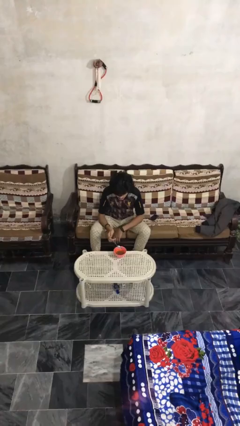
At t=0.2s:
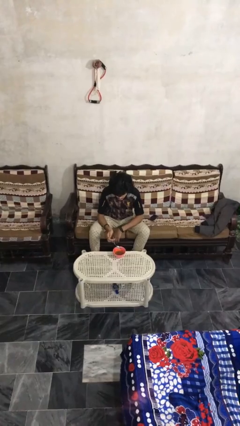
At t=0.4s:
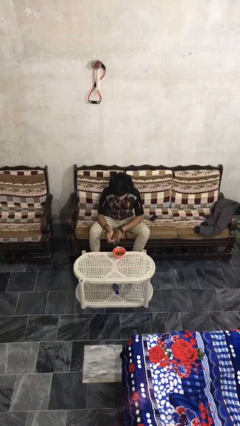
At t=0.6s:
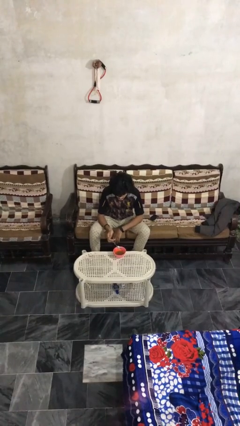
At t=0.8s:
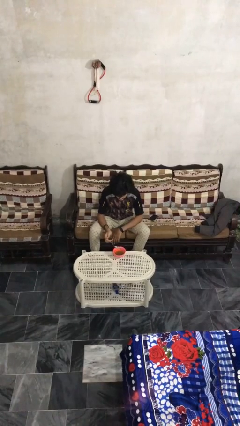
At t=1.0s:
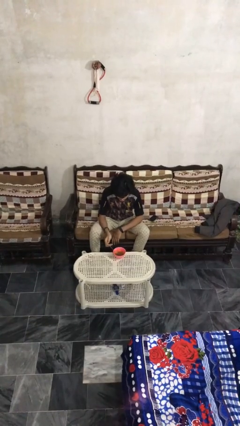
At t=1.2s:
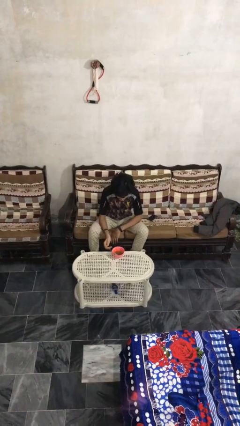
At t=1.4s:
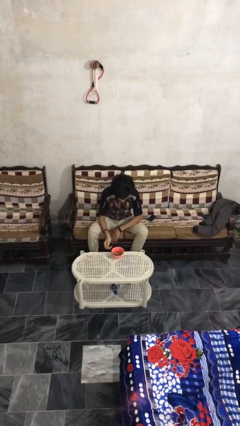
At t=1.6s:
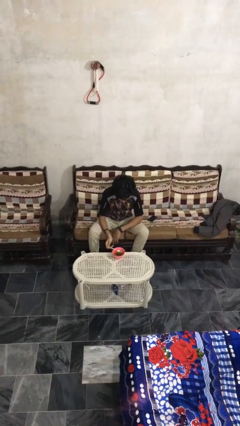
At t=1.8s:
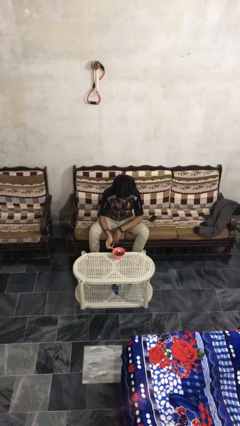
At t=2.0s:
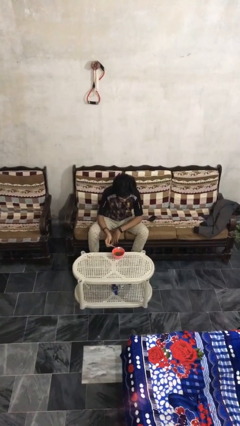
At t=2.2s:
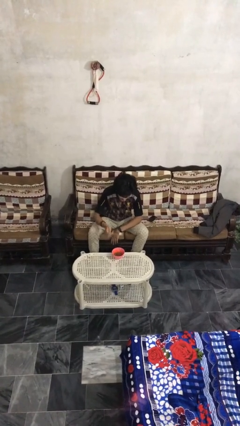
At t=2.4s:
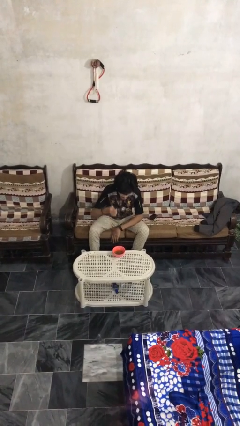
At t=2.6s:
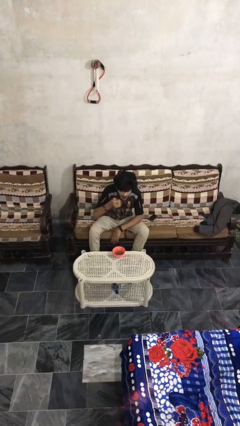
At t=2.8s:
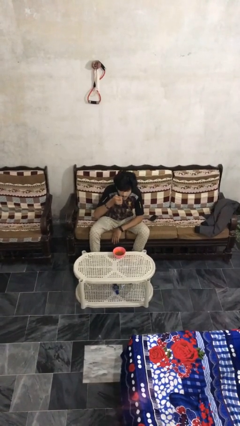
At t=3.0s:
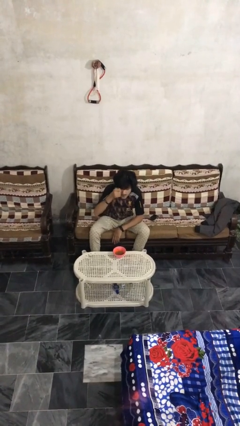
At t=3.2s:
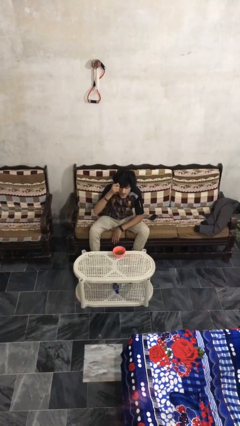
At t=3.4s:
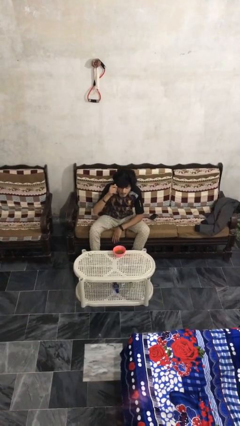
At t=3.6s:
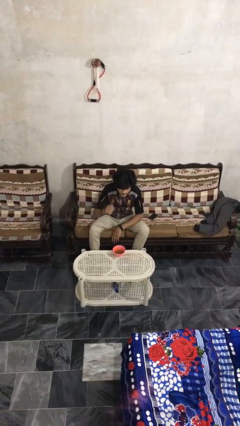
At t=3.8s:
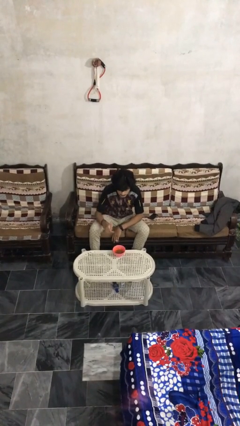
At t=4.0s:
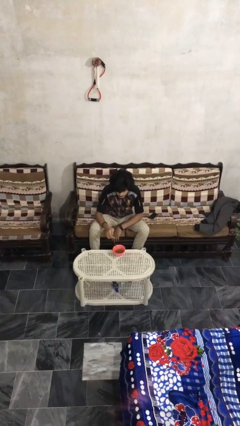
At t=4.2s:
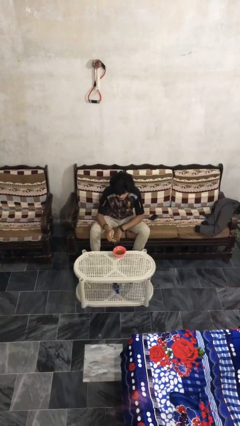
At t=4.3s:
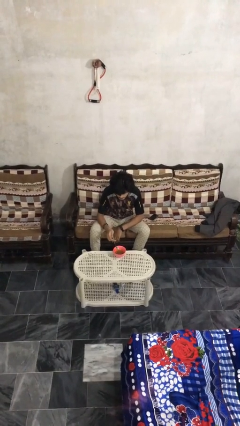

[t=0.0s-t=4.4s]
person eats with utensil

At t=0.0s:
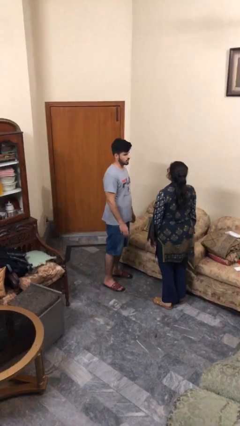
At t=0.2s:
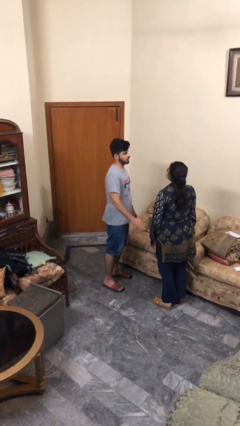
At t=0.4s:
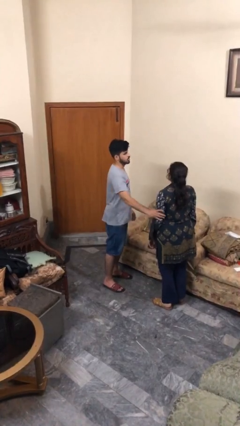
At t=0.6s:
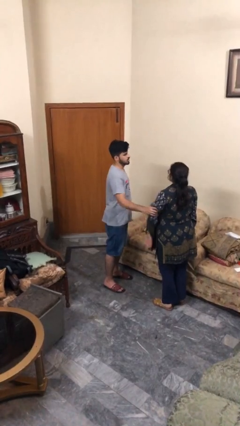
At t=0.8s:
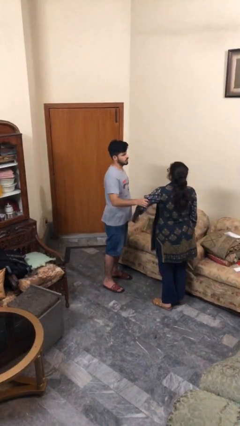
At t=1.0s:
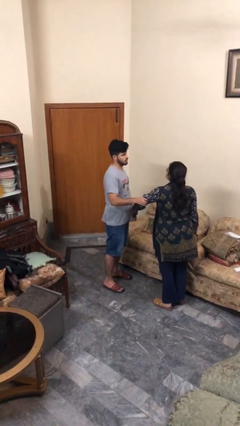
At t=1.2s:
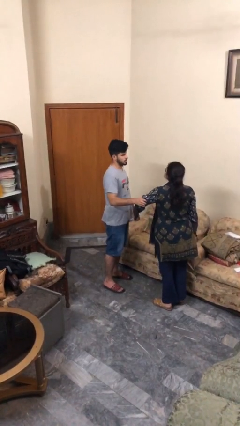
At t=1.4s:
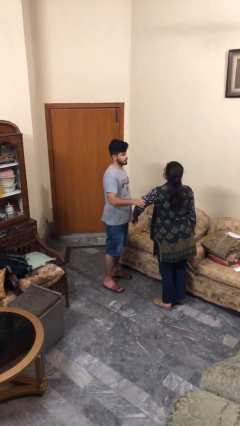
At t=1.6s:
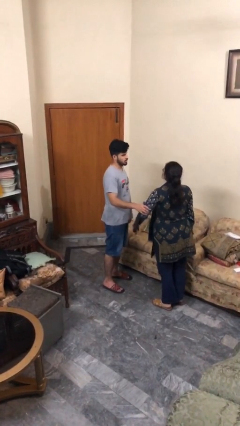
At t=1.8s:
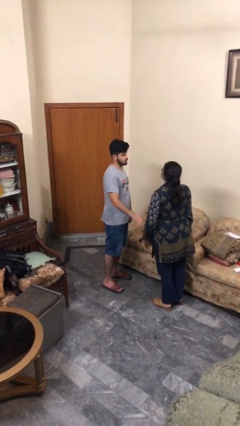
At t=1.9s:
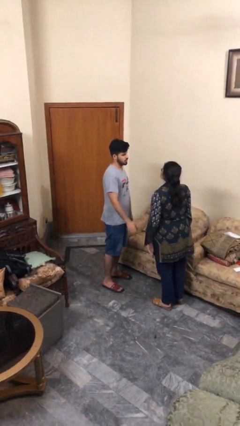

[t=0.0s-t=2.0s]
person grabs person by bicep

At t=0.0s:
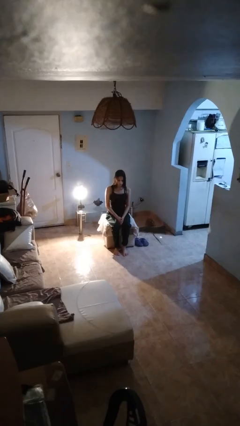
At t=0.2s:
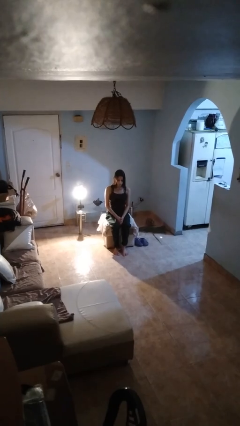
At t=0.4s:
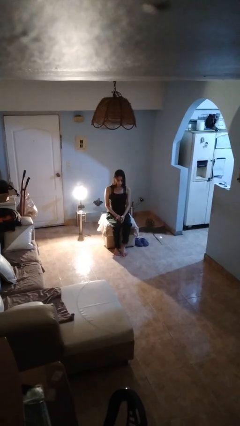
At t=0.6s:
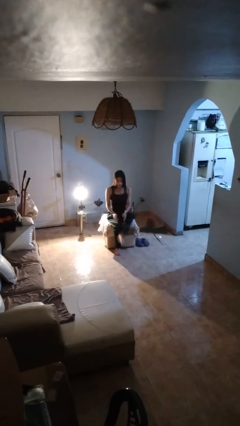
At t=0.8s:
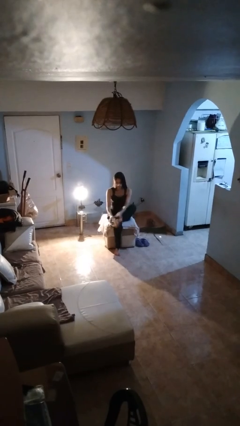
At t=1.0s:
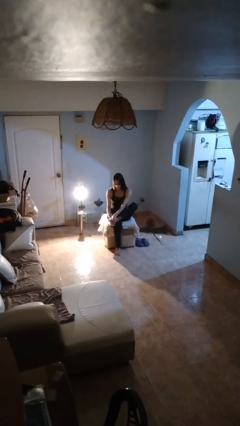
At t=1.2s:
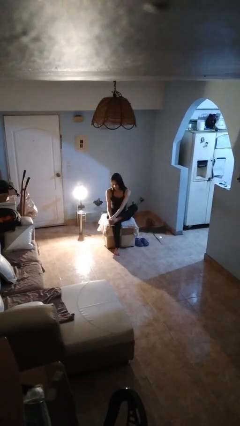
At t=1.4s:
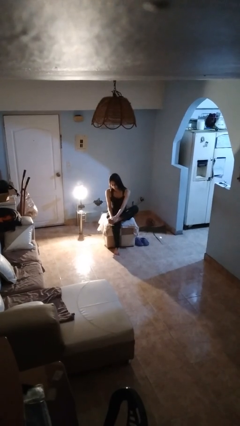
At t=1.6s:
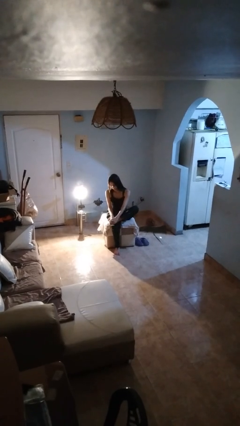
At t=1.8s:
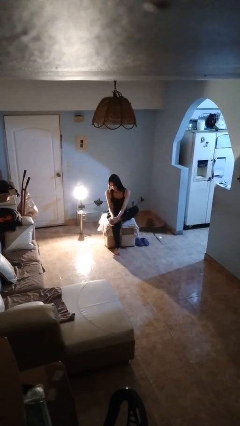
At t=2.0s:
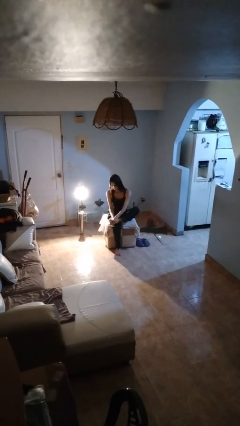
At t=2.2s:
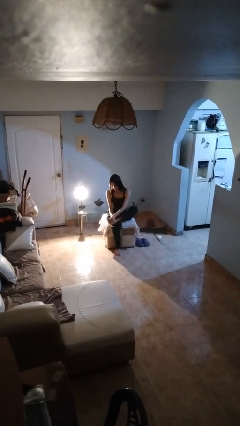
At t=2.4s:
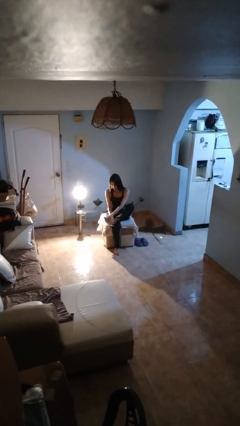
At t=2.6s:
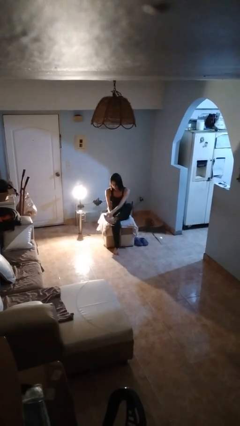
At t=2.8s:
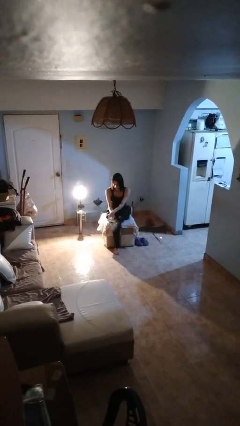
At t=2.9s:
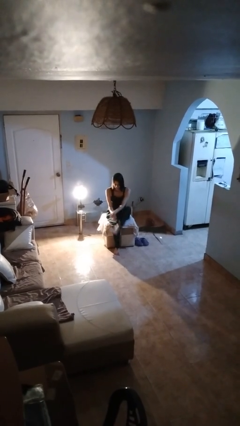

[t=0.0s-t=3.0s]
person rubs foot

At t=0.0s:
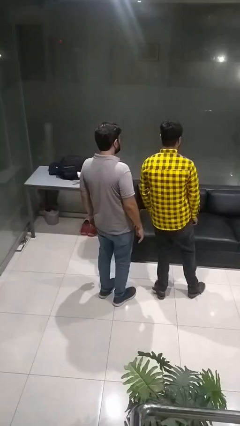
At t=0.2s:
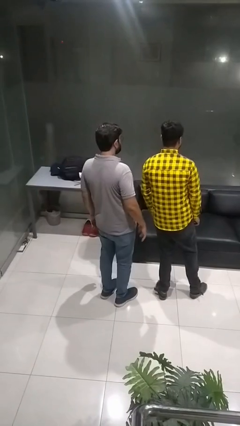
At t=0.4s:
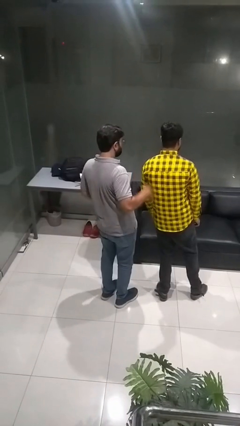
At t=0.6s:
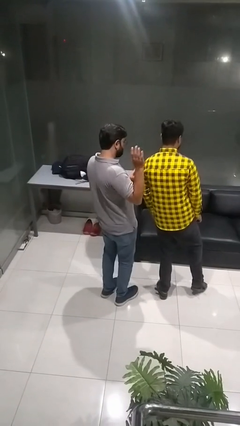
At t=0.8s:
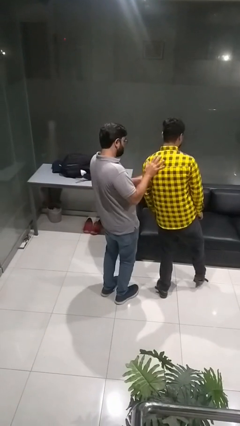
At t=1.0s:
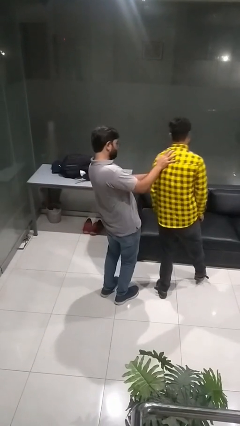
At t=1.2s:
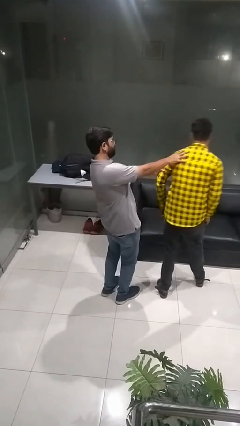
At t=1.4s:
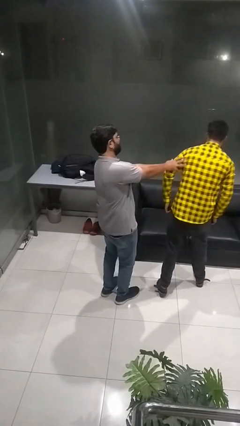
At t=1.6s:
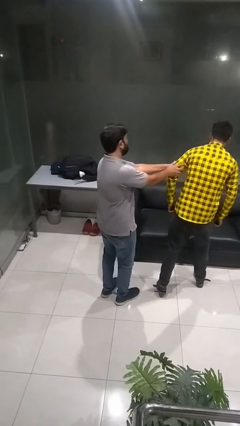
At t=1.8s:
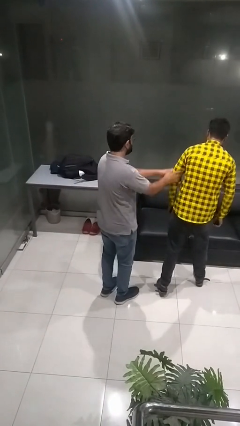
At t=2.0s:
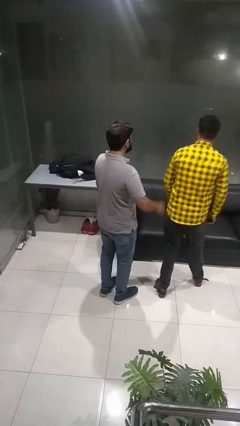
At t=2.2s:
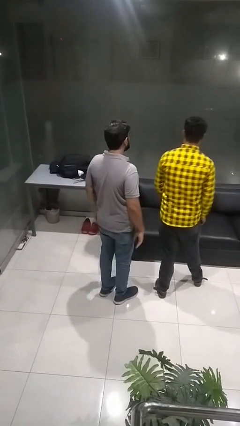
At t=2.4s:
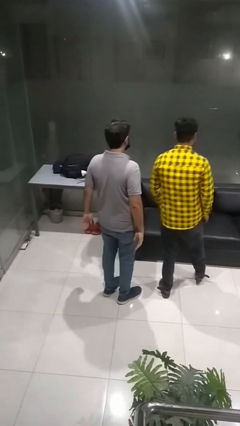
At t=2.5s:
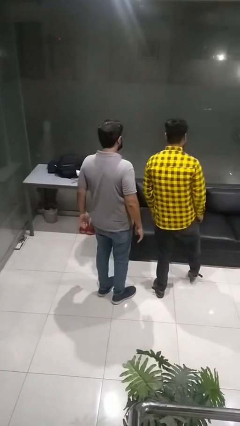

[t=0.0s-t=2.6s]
person shoves person

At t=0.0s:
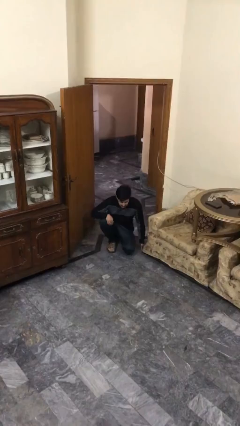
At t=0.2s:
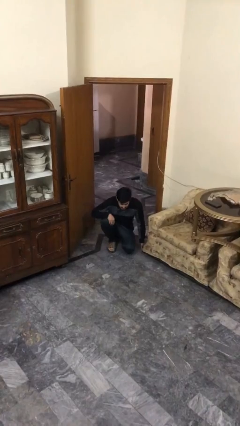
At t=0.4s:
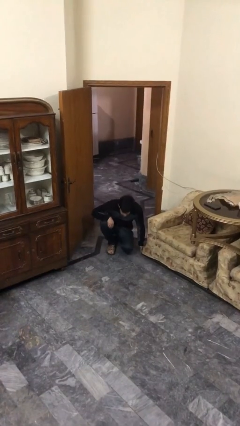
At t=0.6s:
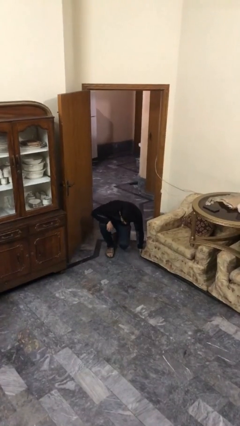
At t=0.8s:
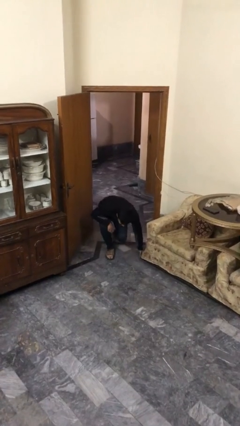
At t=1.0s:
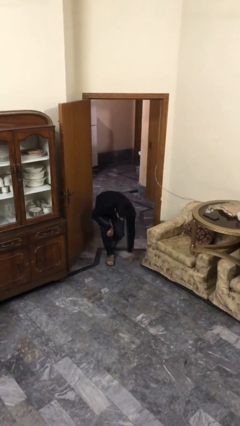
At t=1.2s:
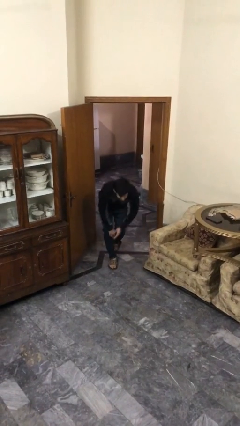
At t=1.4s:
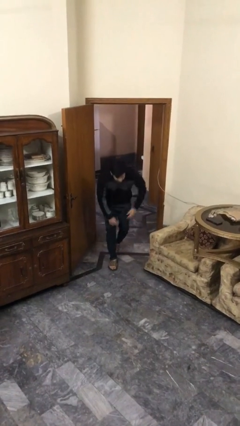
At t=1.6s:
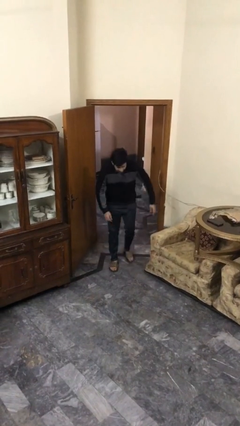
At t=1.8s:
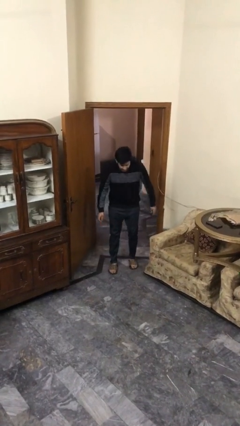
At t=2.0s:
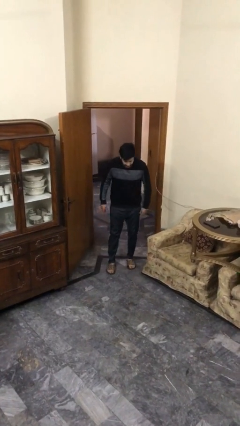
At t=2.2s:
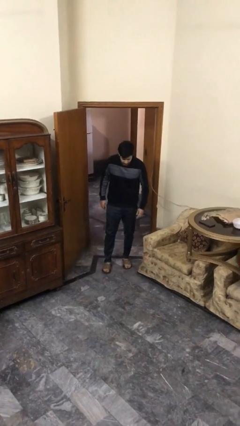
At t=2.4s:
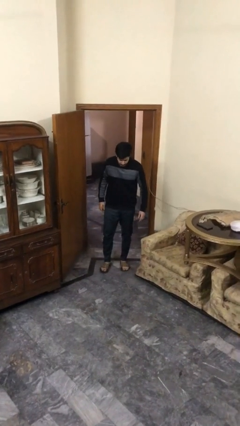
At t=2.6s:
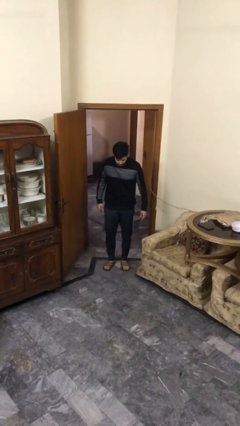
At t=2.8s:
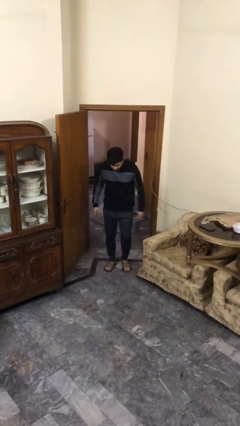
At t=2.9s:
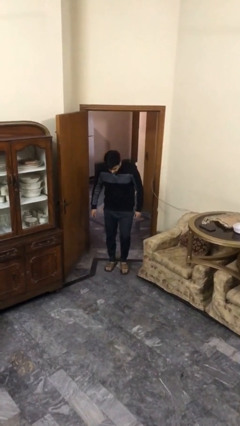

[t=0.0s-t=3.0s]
person stands up

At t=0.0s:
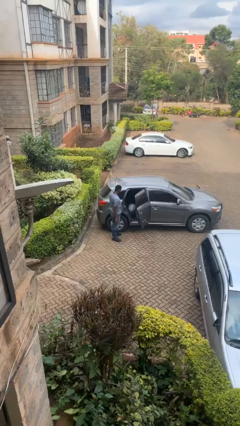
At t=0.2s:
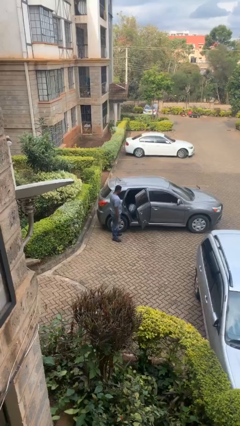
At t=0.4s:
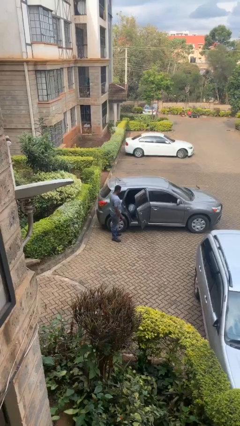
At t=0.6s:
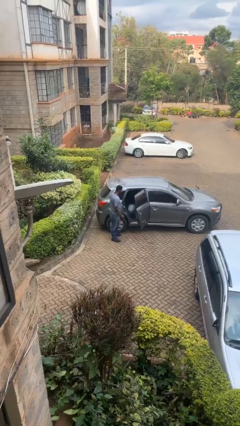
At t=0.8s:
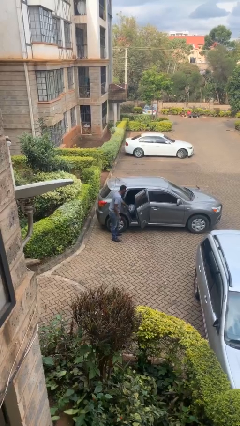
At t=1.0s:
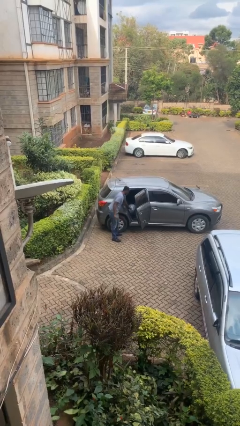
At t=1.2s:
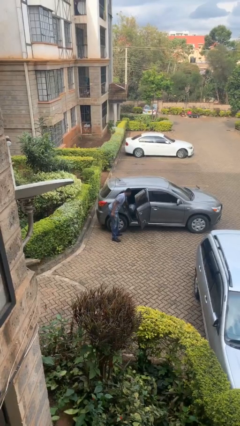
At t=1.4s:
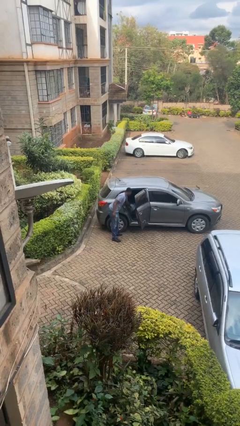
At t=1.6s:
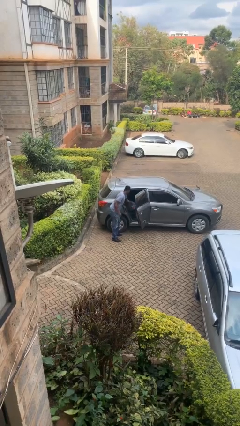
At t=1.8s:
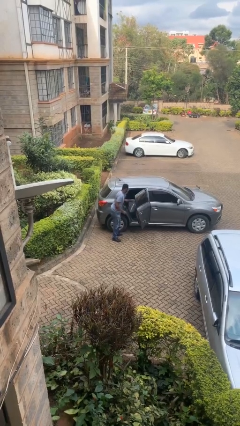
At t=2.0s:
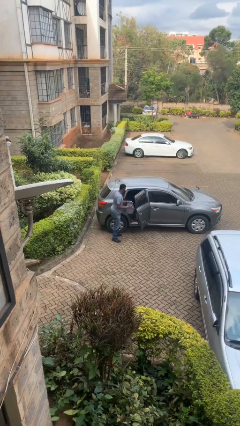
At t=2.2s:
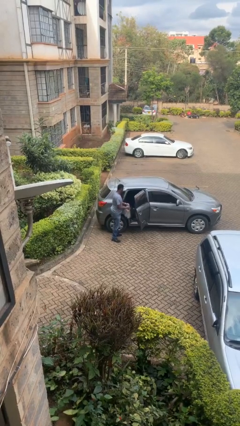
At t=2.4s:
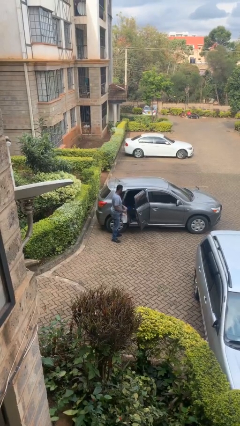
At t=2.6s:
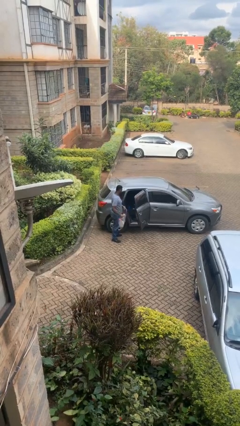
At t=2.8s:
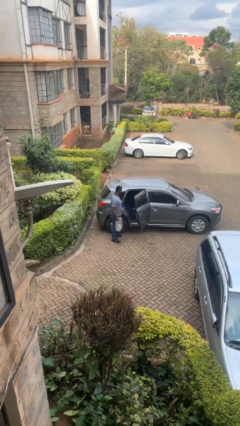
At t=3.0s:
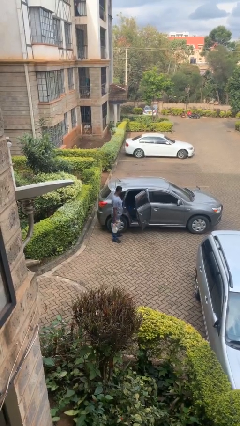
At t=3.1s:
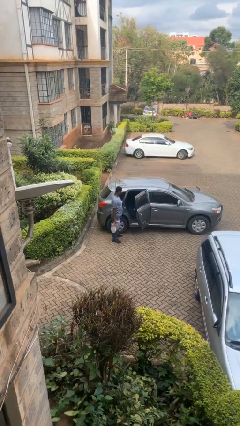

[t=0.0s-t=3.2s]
person unloads car
